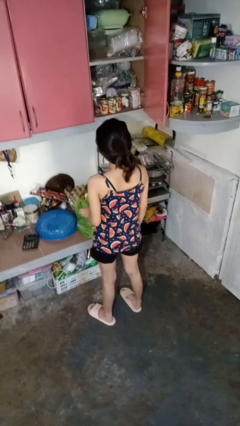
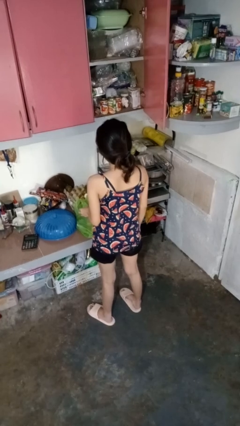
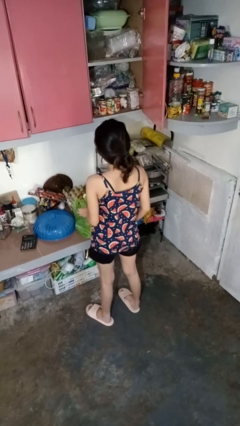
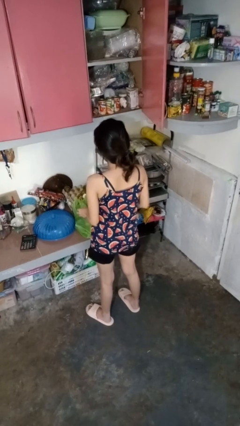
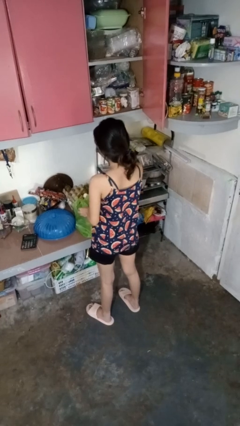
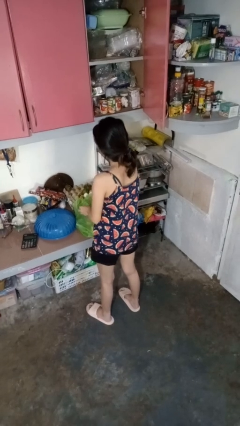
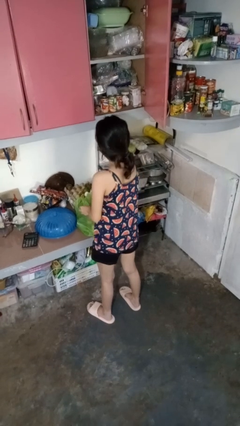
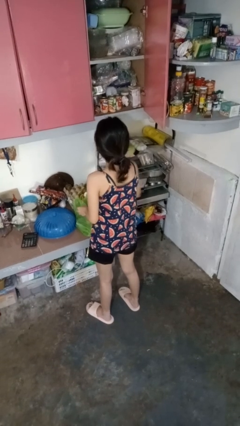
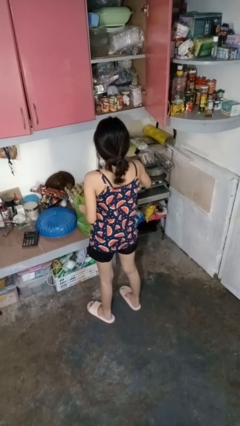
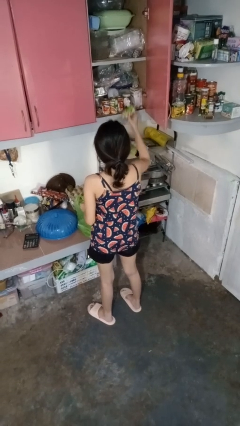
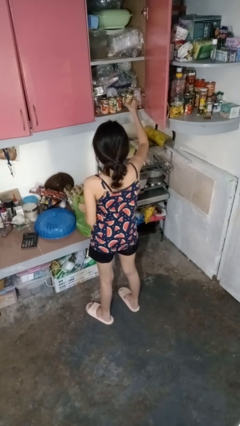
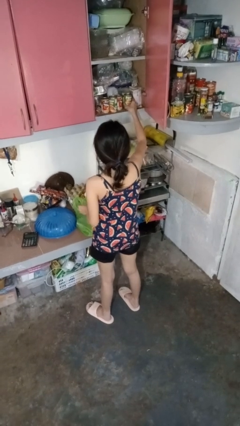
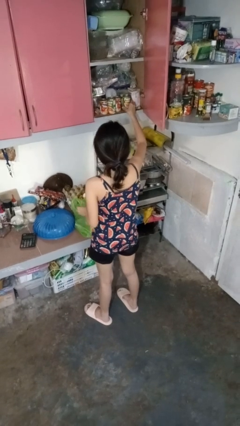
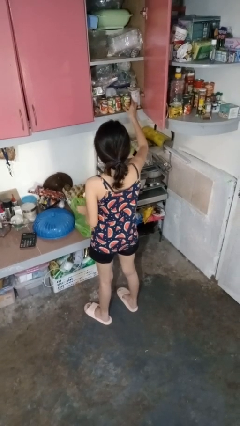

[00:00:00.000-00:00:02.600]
person loads groceries into cabinet

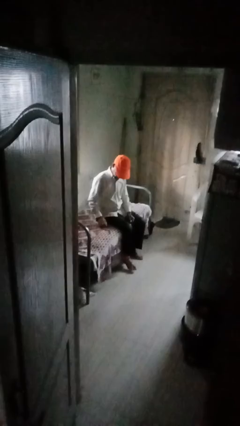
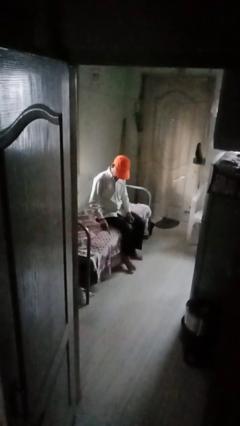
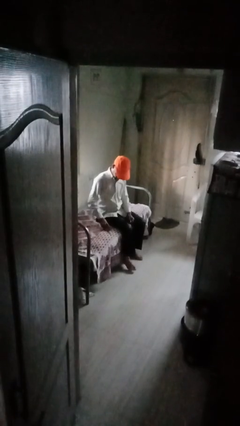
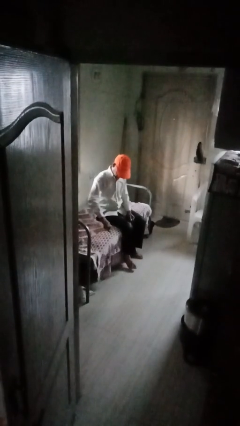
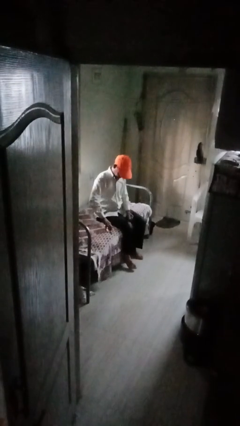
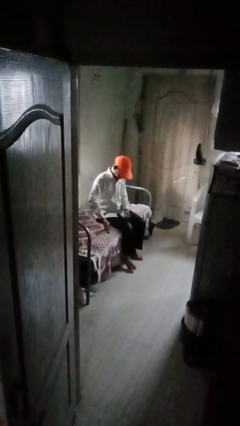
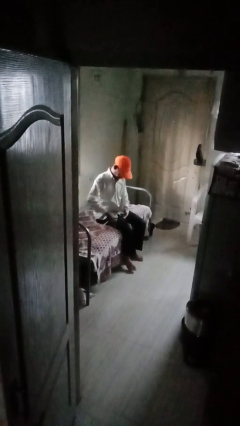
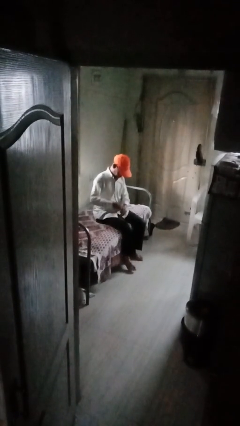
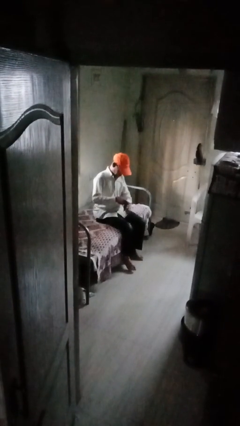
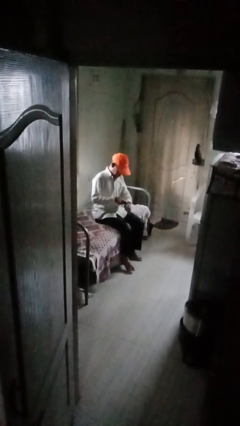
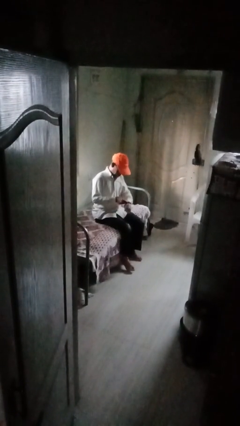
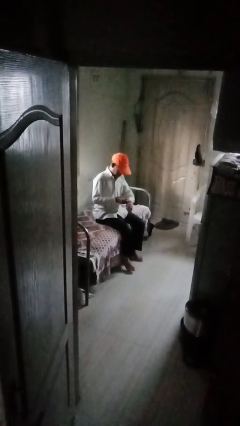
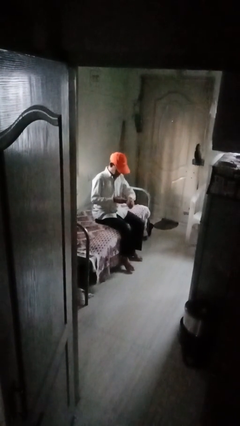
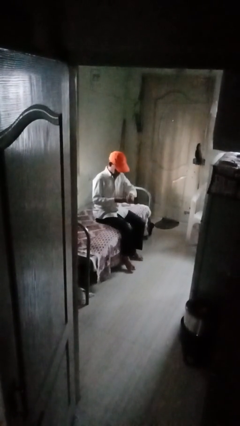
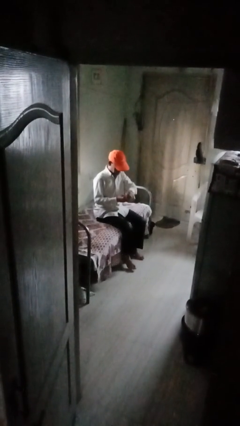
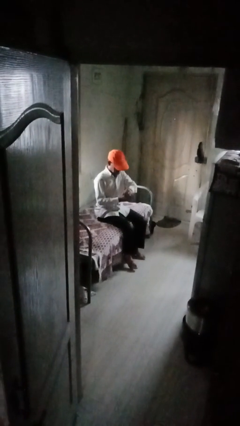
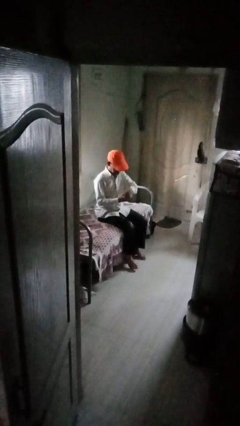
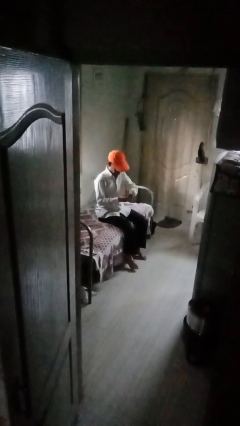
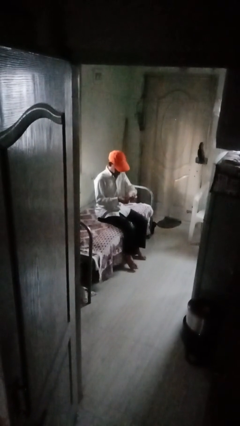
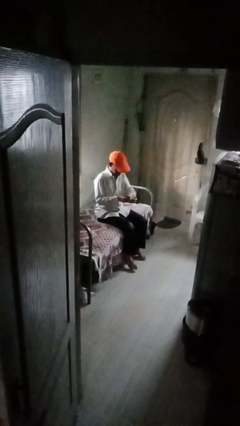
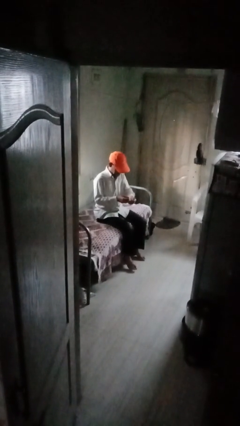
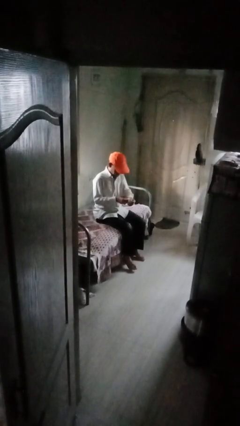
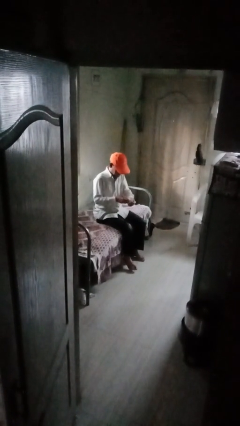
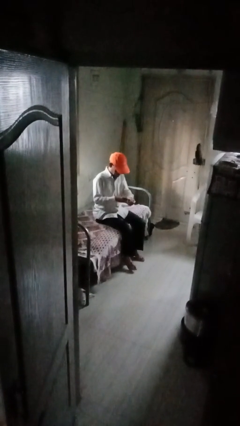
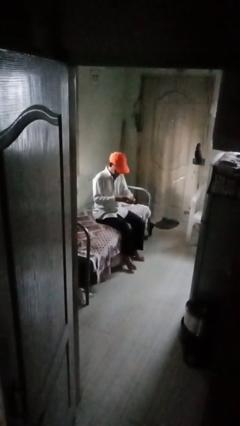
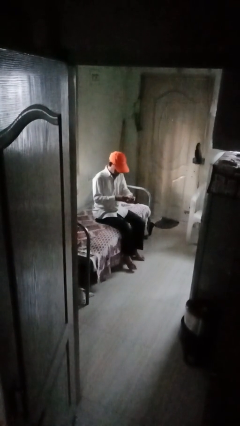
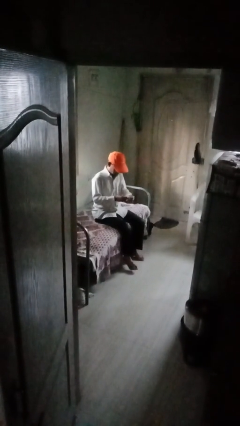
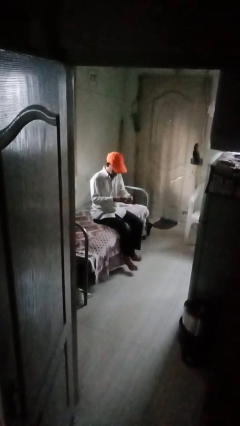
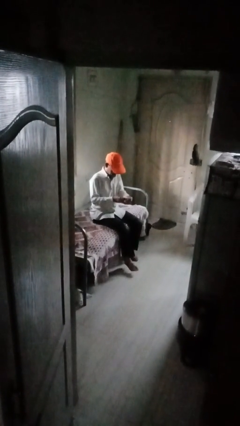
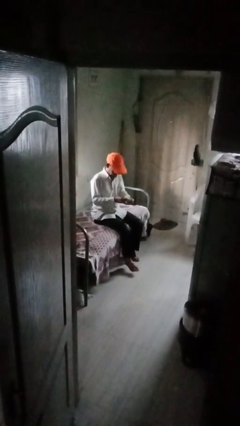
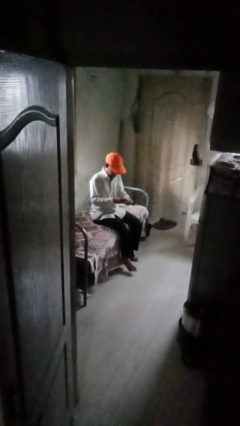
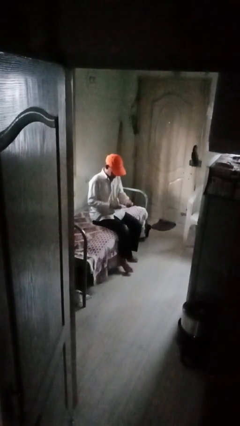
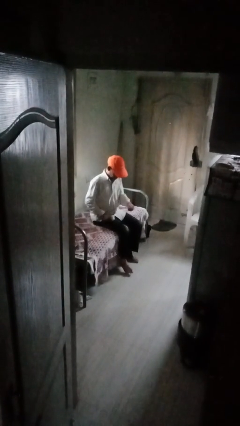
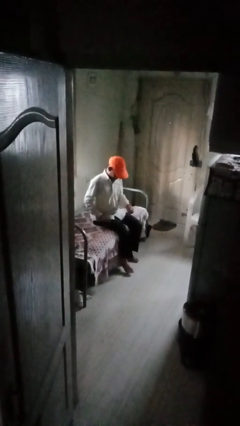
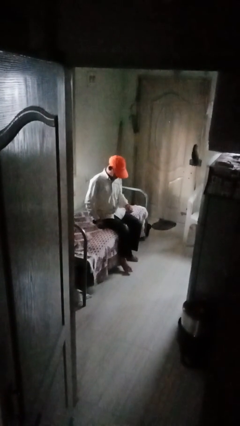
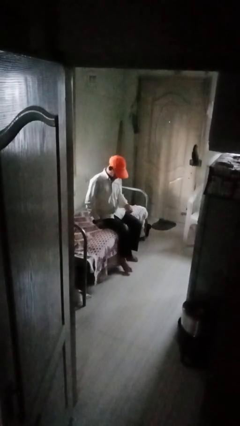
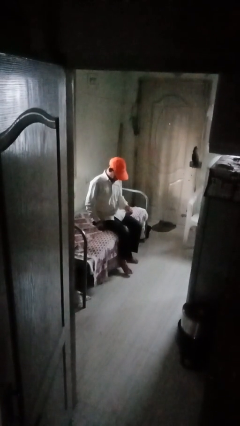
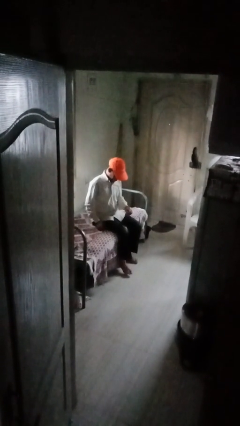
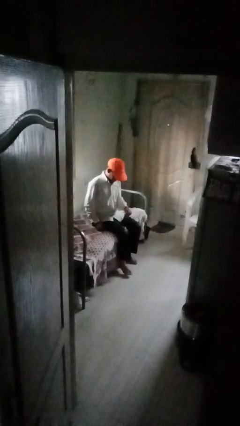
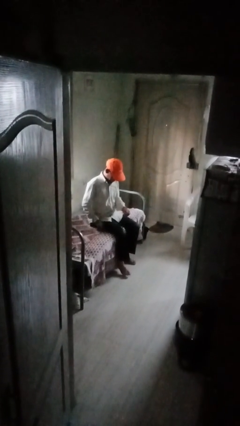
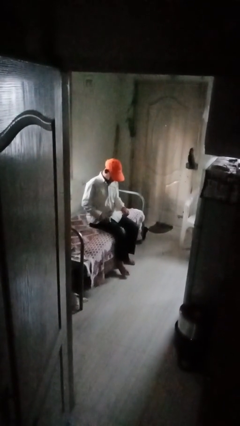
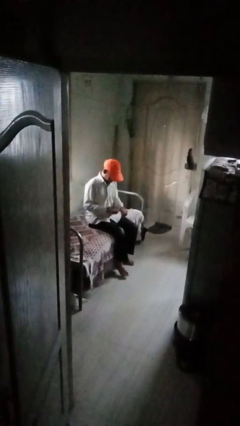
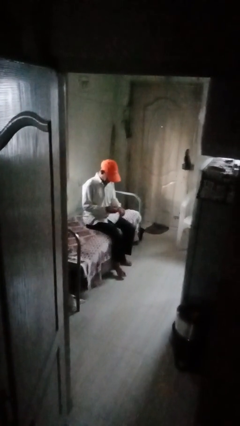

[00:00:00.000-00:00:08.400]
person puts on wristwatch

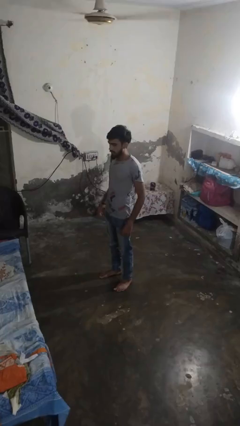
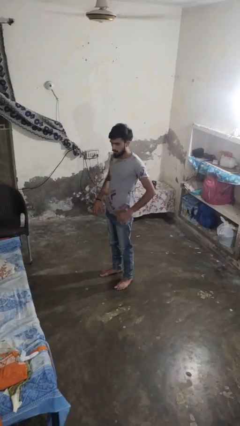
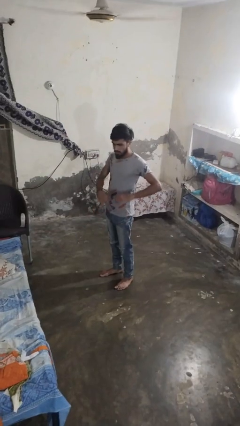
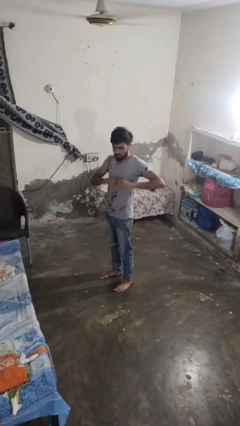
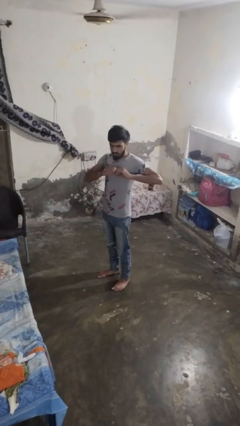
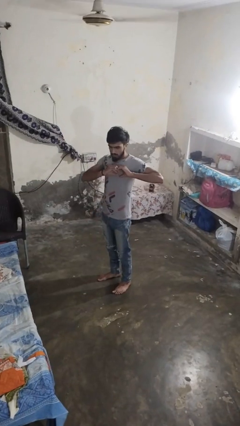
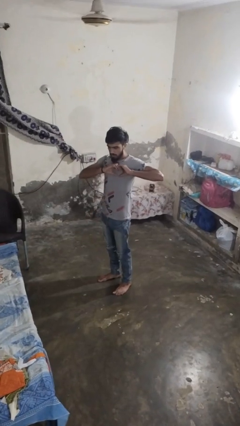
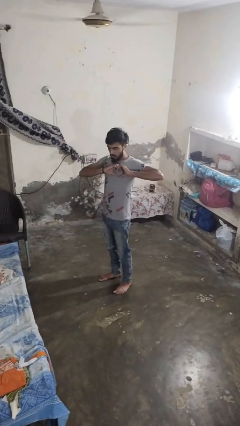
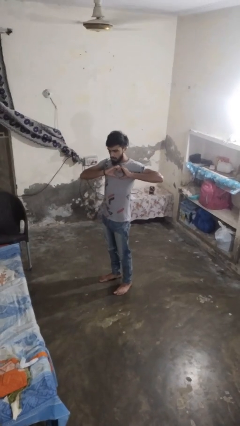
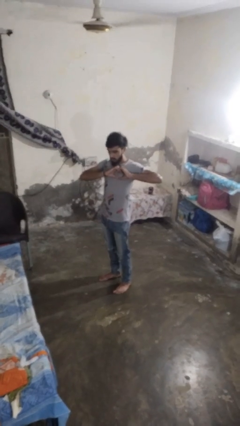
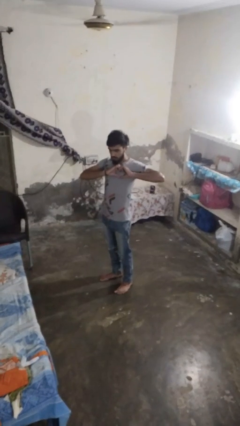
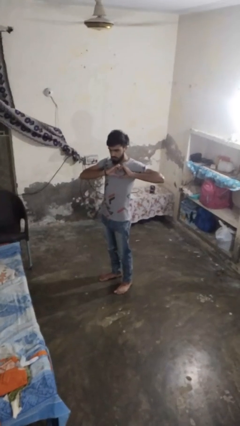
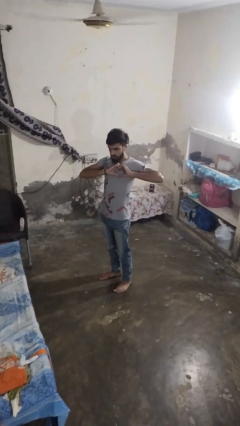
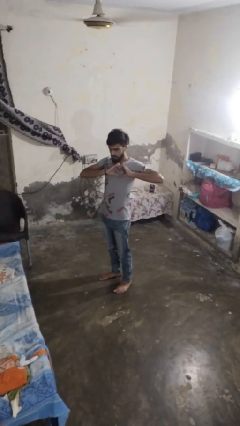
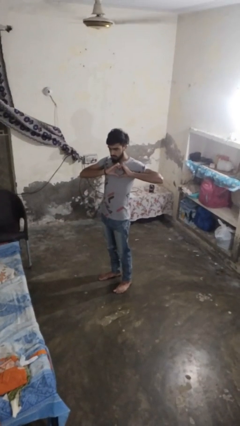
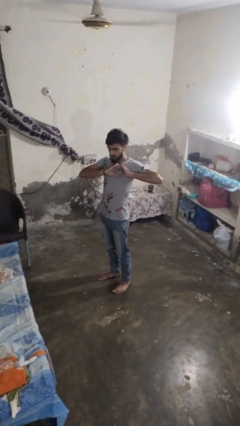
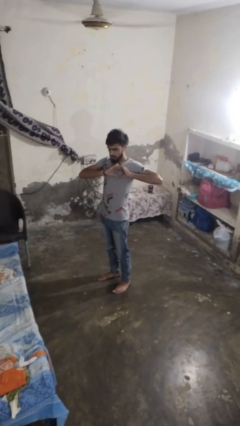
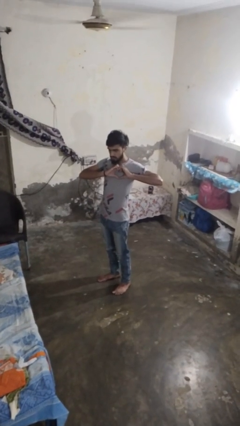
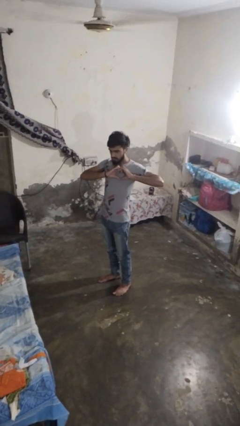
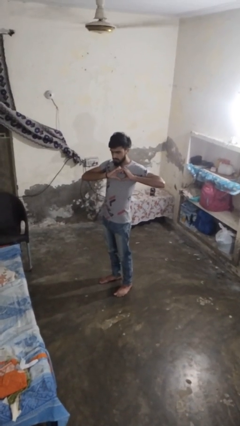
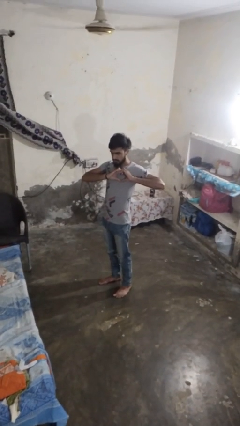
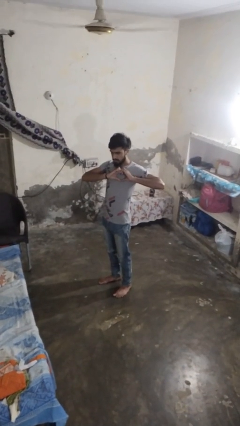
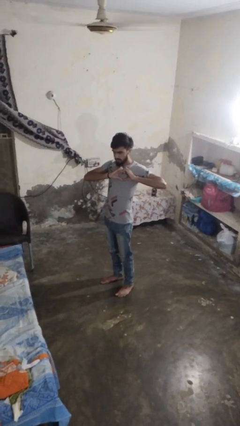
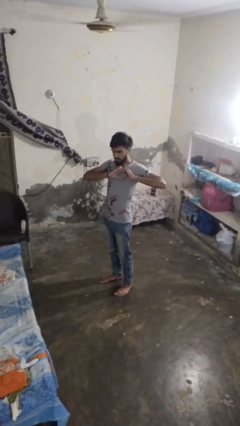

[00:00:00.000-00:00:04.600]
person gestures heart

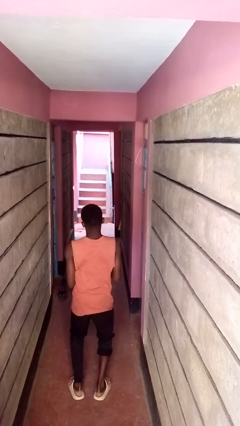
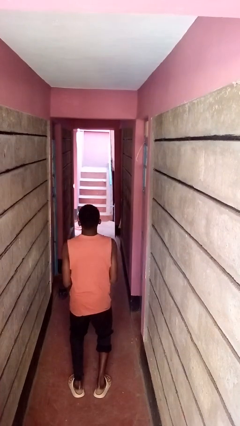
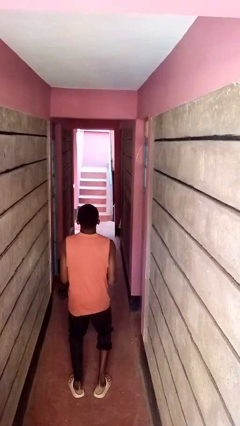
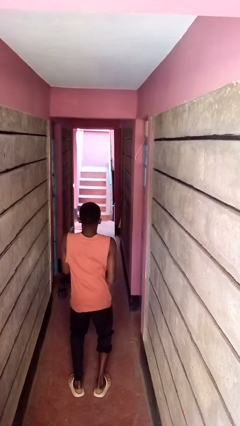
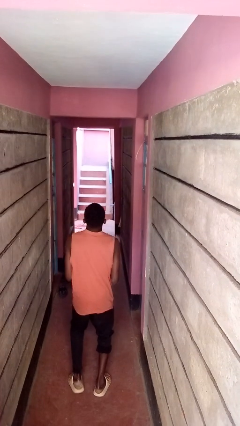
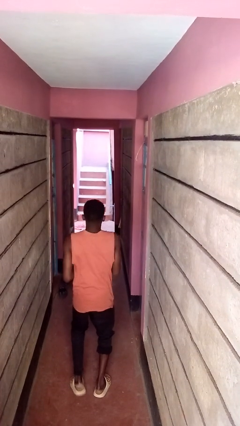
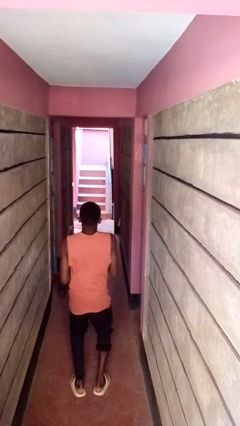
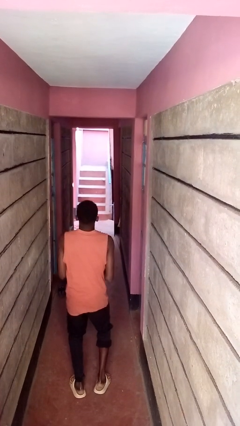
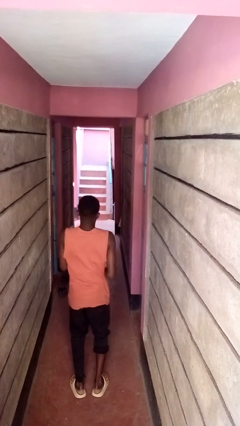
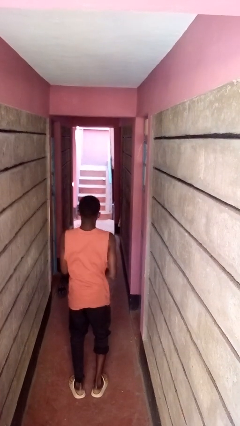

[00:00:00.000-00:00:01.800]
person dances in place
